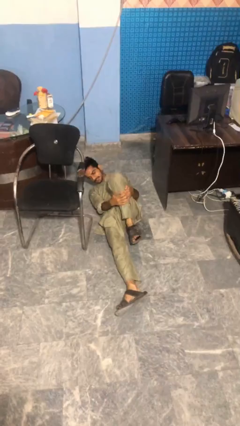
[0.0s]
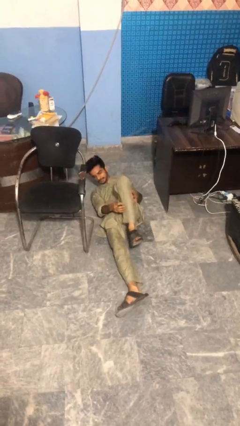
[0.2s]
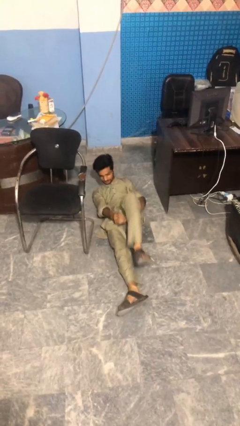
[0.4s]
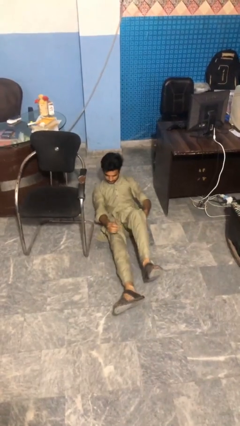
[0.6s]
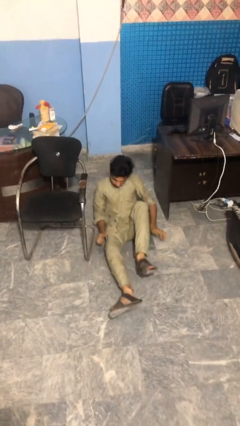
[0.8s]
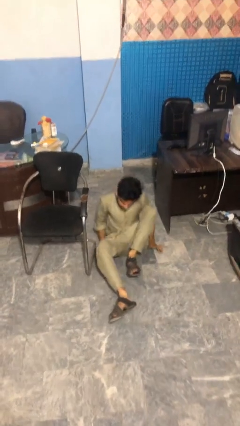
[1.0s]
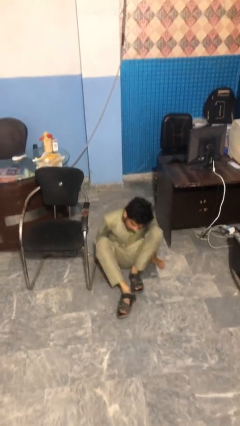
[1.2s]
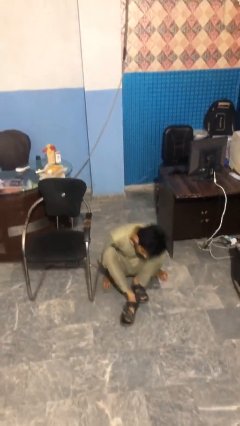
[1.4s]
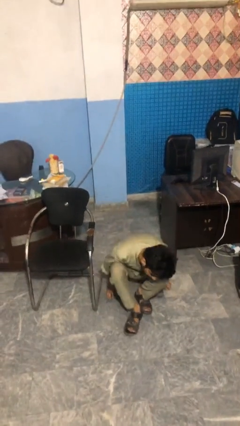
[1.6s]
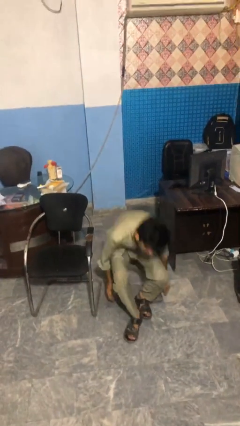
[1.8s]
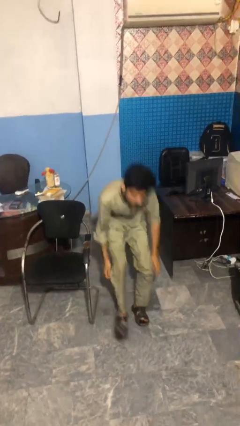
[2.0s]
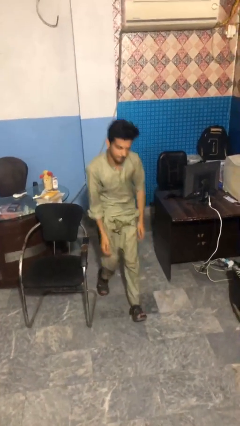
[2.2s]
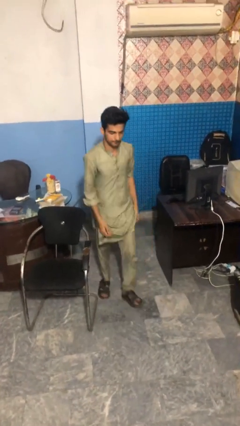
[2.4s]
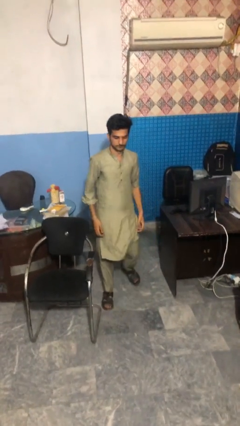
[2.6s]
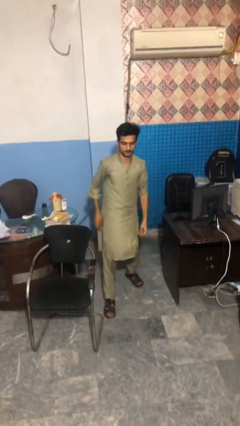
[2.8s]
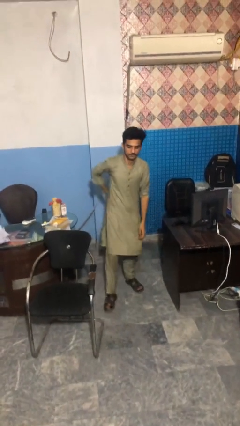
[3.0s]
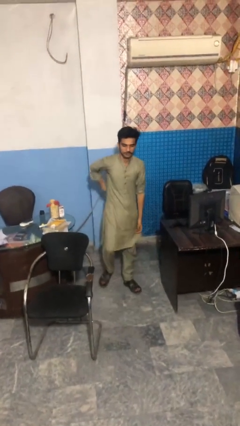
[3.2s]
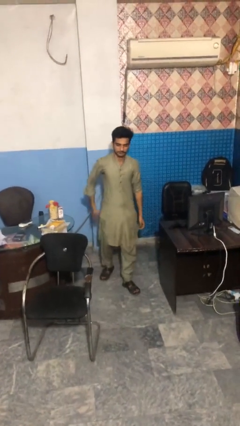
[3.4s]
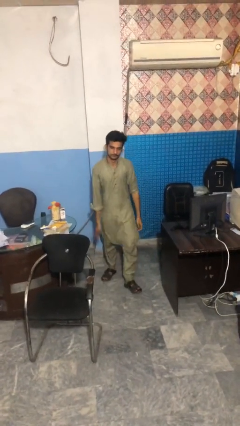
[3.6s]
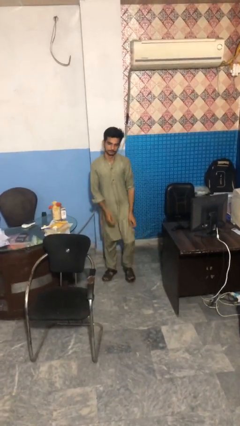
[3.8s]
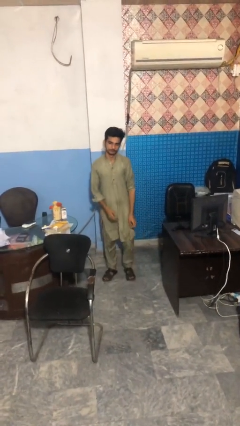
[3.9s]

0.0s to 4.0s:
person stands up from floor

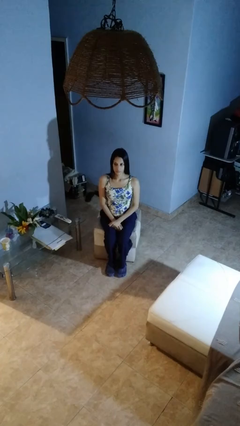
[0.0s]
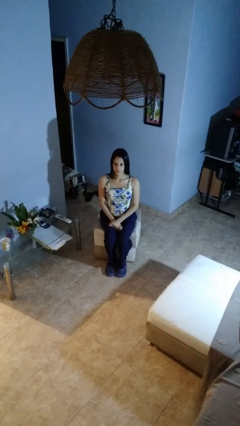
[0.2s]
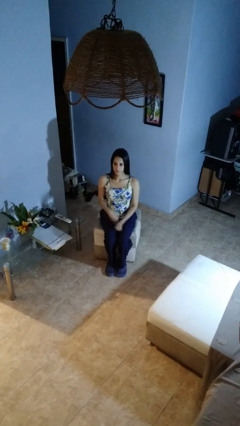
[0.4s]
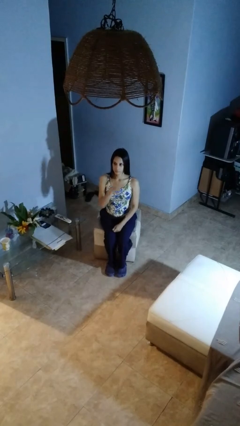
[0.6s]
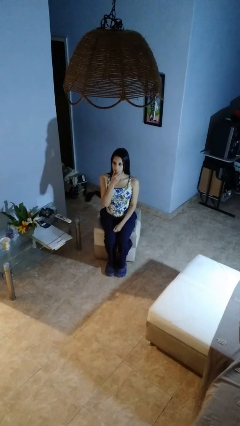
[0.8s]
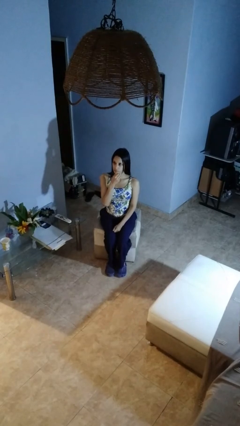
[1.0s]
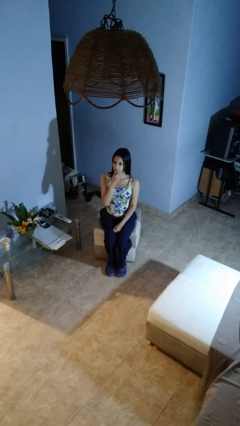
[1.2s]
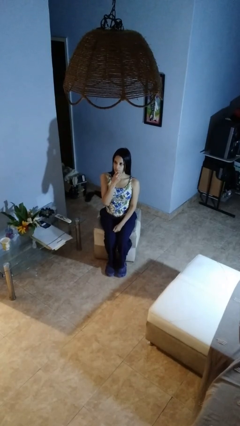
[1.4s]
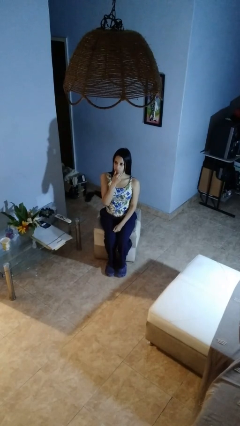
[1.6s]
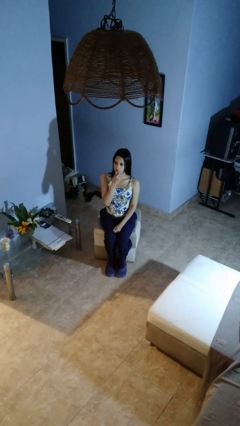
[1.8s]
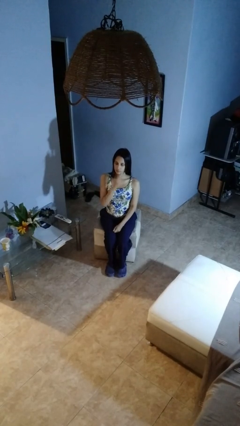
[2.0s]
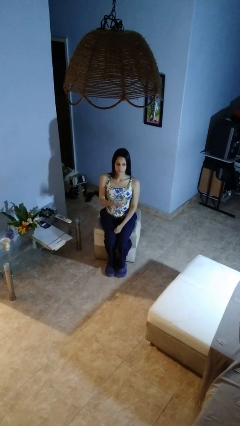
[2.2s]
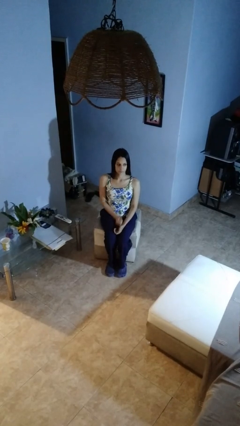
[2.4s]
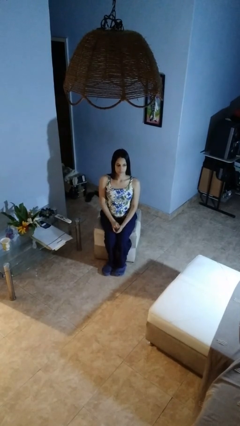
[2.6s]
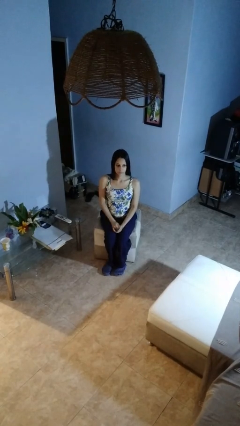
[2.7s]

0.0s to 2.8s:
person strokes chin

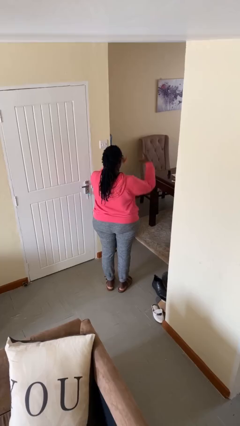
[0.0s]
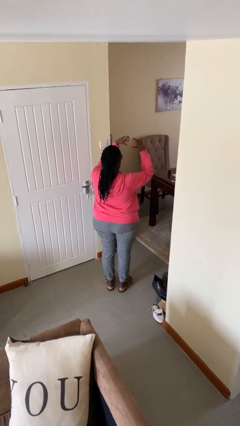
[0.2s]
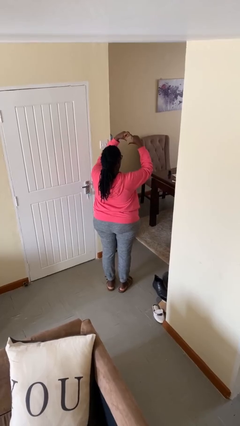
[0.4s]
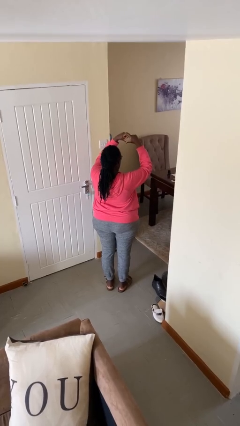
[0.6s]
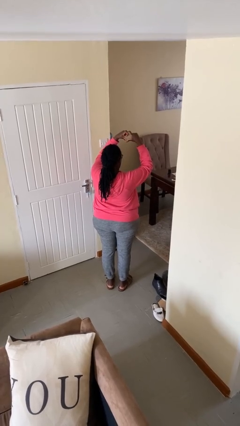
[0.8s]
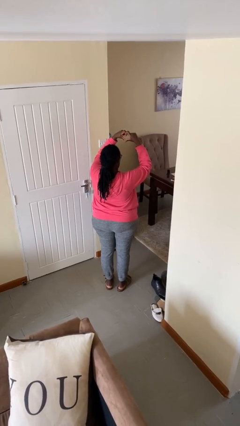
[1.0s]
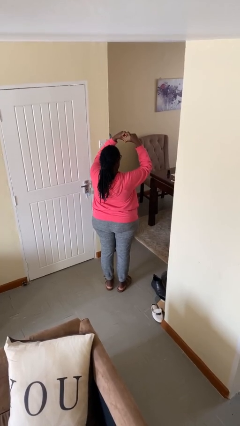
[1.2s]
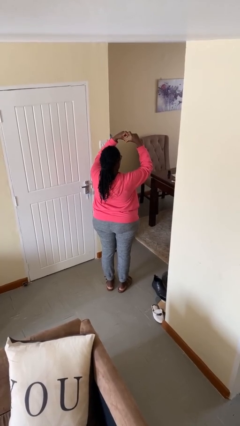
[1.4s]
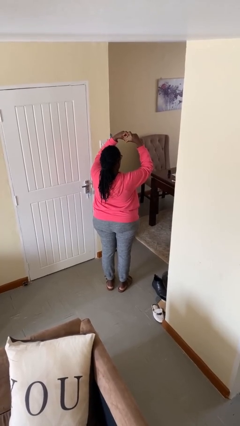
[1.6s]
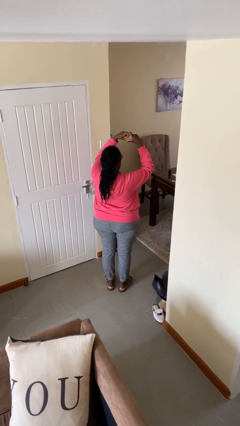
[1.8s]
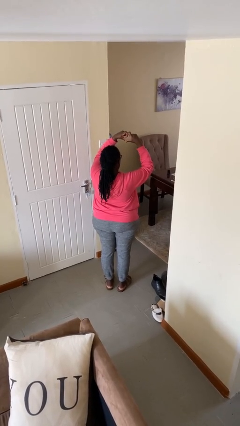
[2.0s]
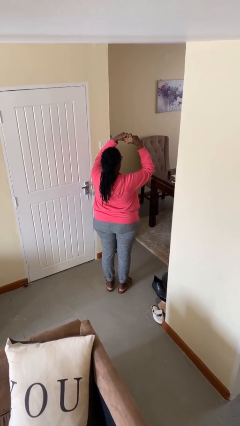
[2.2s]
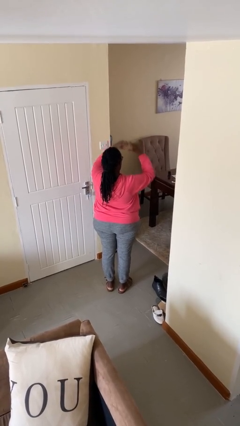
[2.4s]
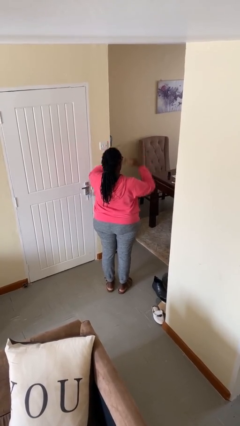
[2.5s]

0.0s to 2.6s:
person gestures heart

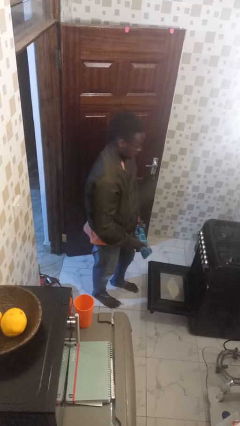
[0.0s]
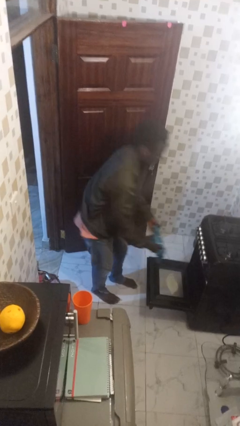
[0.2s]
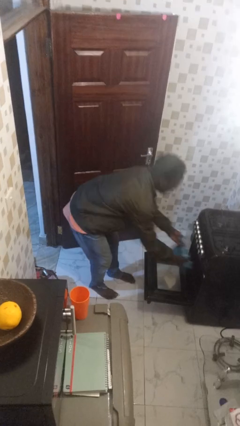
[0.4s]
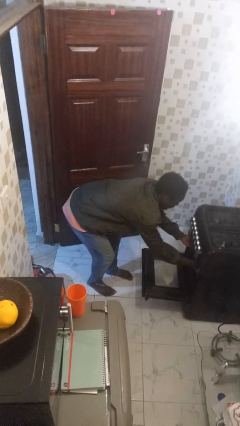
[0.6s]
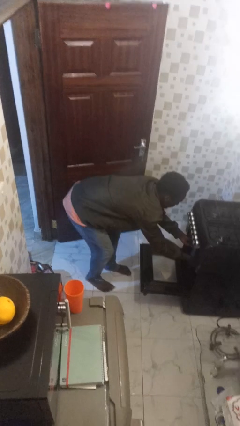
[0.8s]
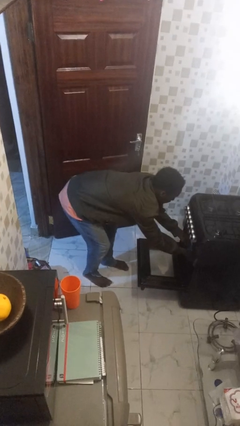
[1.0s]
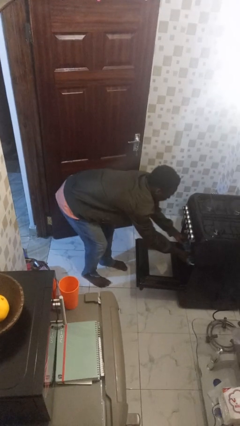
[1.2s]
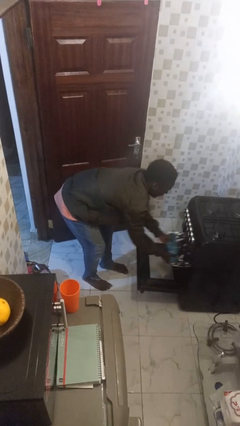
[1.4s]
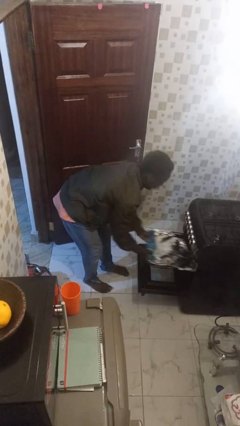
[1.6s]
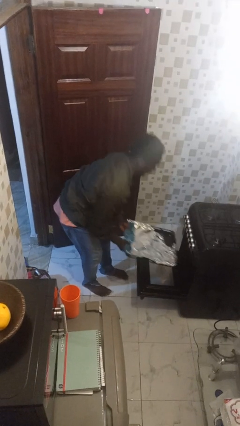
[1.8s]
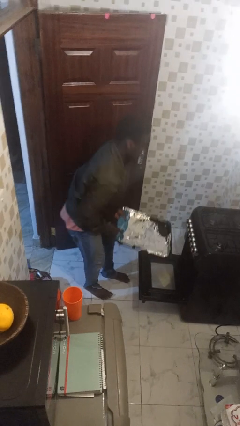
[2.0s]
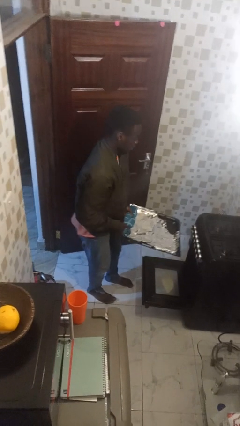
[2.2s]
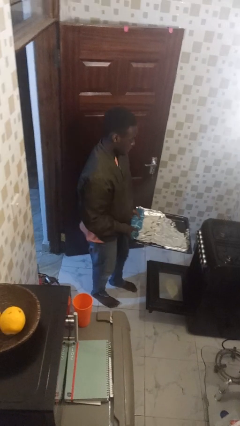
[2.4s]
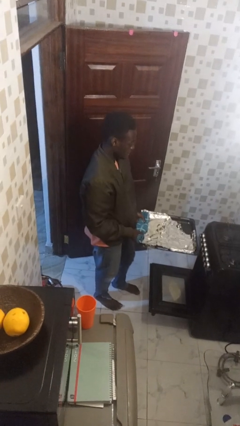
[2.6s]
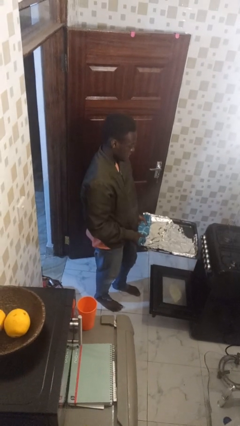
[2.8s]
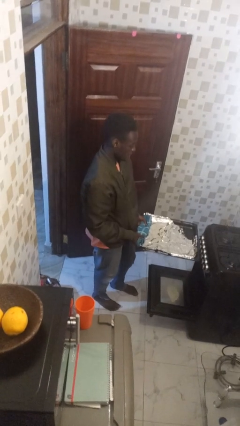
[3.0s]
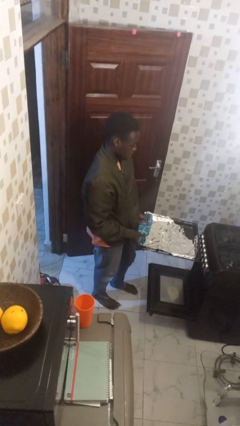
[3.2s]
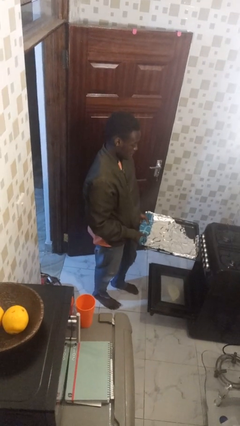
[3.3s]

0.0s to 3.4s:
person takes object from oven

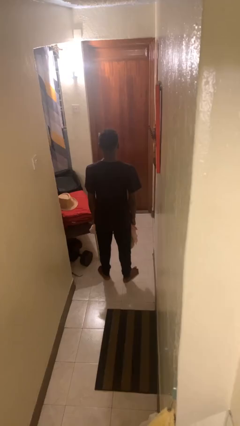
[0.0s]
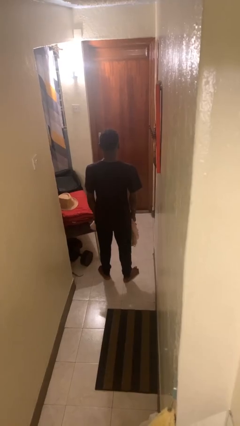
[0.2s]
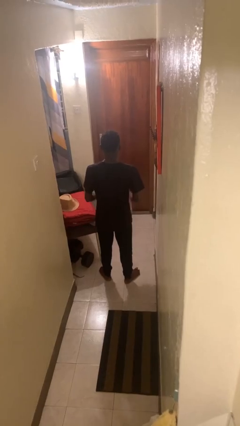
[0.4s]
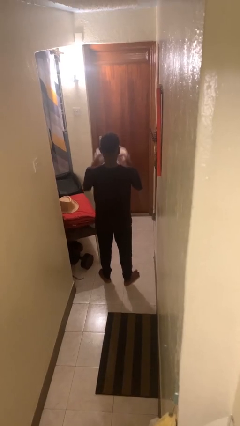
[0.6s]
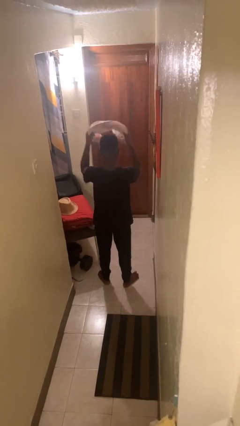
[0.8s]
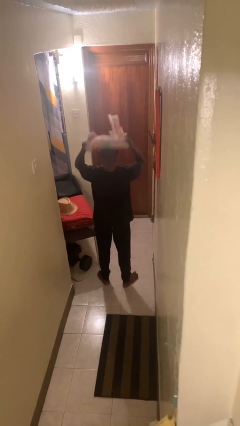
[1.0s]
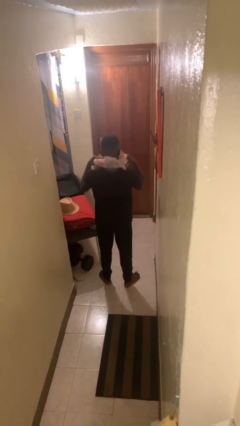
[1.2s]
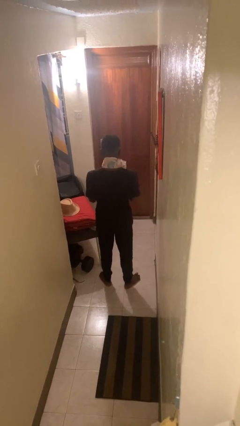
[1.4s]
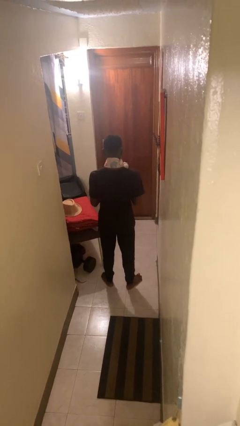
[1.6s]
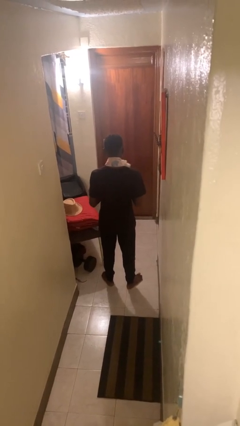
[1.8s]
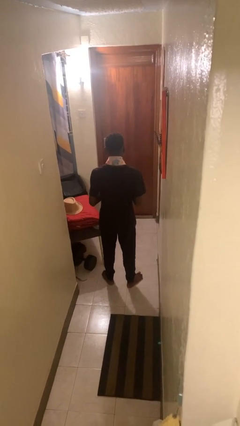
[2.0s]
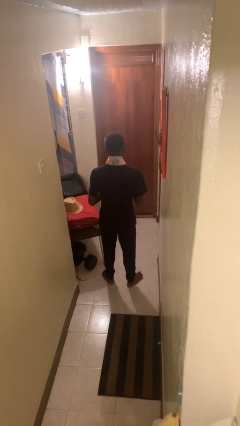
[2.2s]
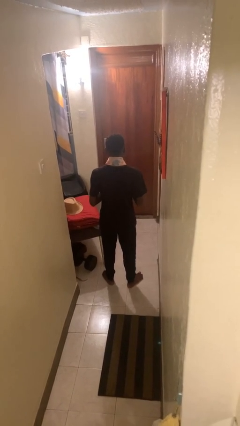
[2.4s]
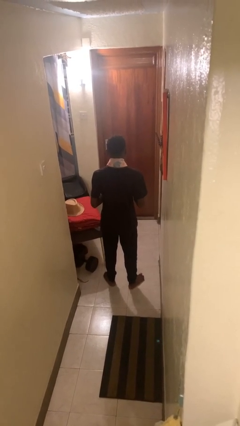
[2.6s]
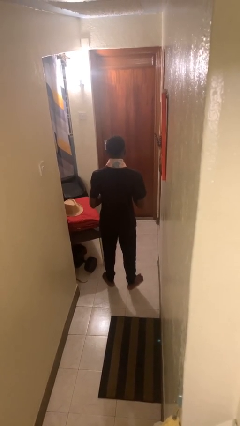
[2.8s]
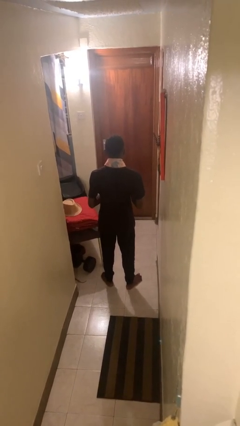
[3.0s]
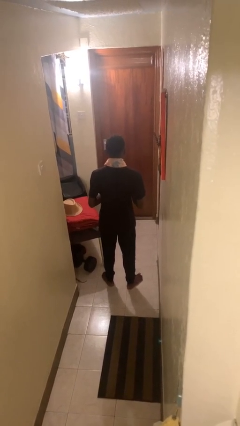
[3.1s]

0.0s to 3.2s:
person puts on scarf

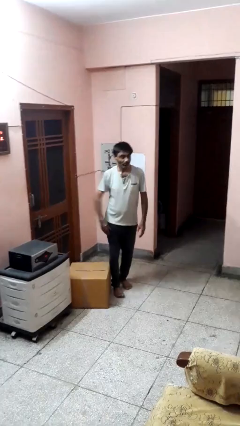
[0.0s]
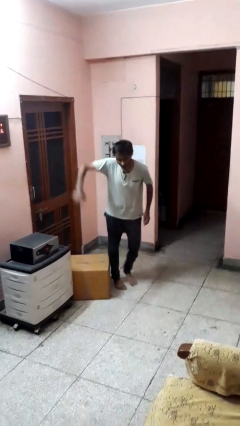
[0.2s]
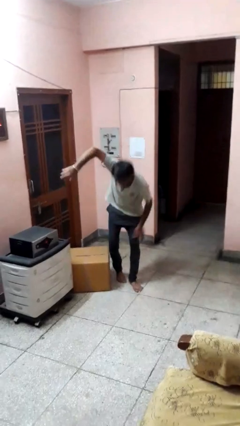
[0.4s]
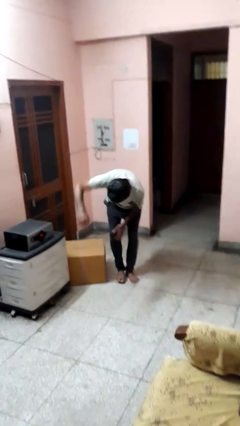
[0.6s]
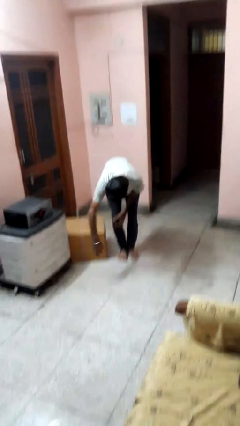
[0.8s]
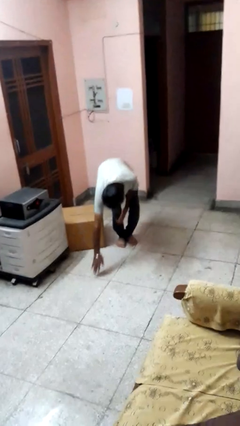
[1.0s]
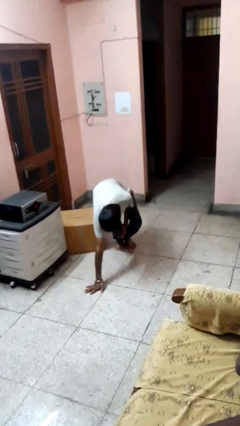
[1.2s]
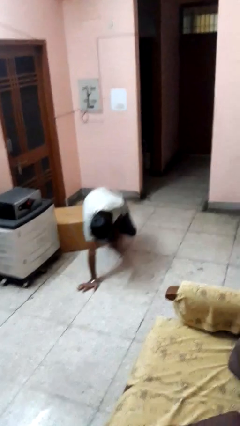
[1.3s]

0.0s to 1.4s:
person trips on object on floor

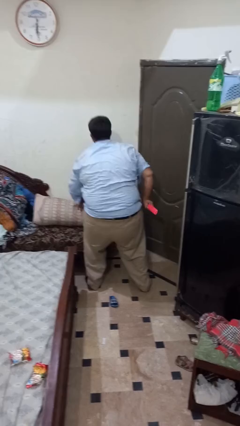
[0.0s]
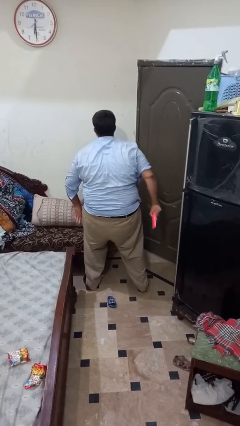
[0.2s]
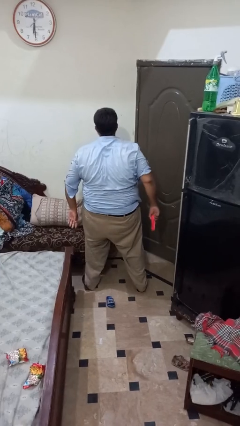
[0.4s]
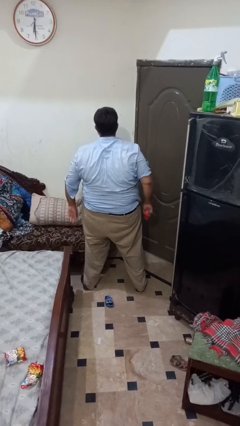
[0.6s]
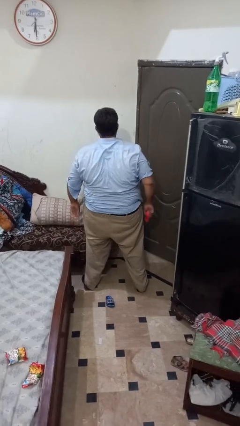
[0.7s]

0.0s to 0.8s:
person searches in couch
